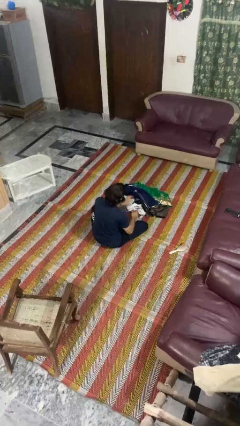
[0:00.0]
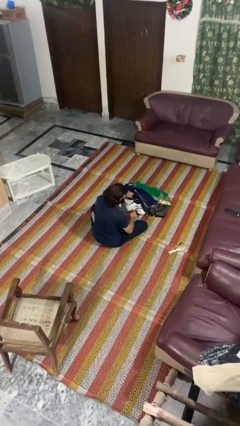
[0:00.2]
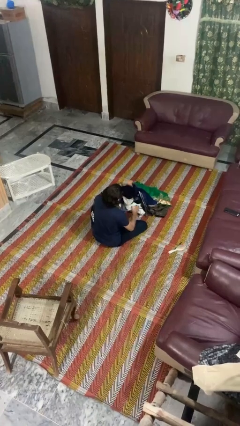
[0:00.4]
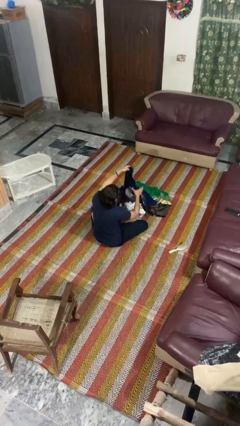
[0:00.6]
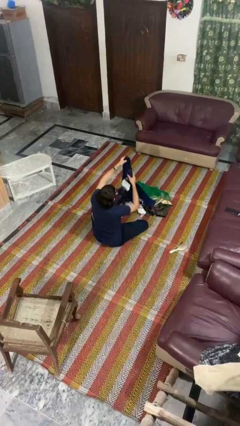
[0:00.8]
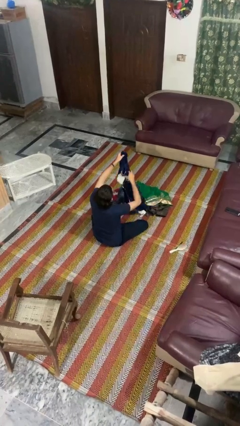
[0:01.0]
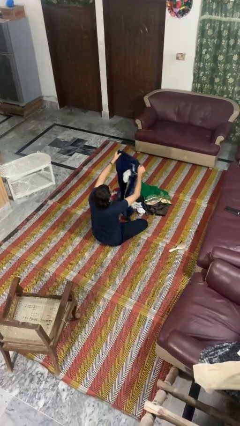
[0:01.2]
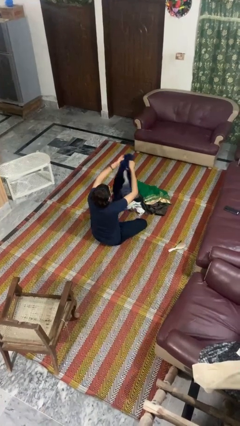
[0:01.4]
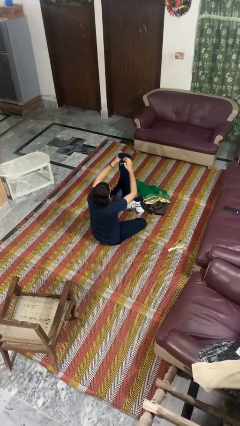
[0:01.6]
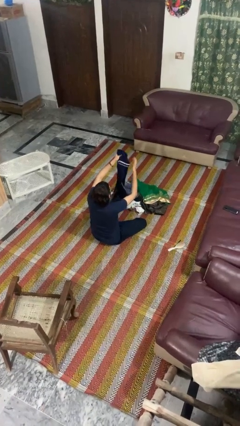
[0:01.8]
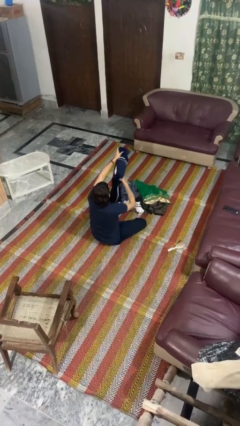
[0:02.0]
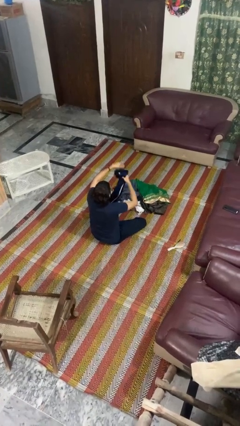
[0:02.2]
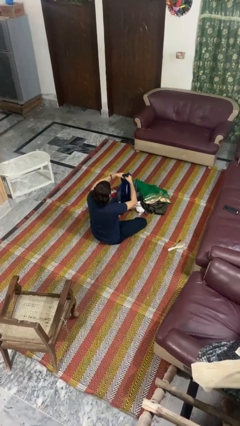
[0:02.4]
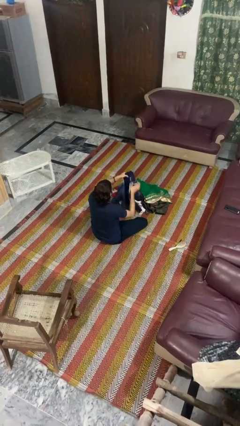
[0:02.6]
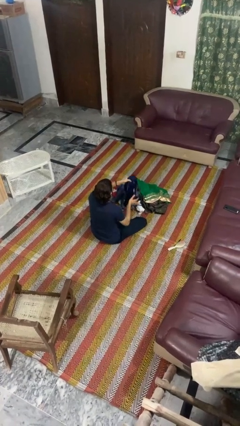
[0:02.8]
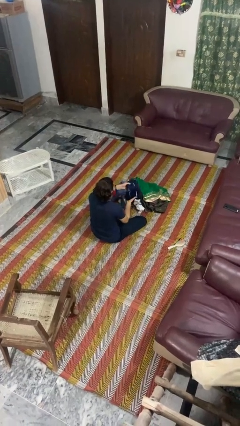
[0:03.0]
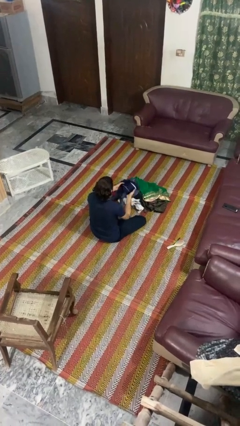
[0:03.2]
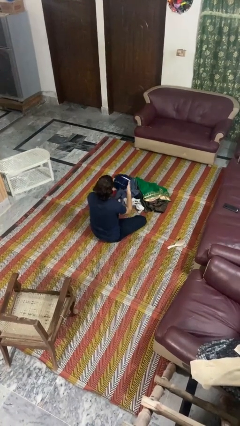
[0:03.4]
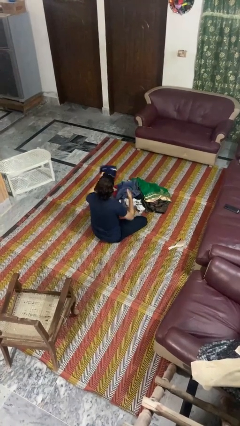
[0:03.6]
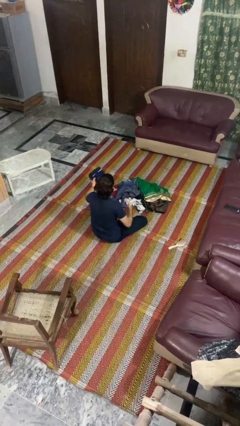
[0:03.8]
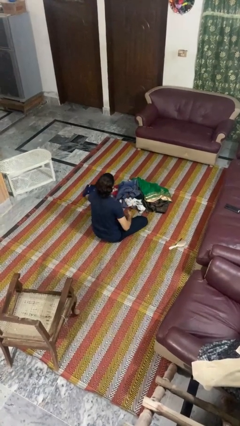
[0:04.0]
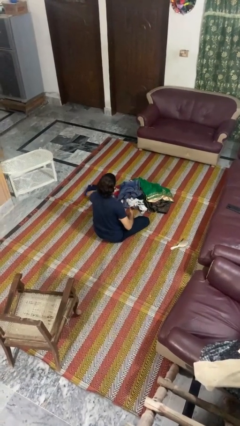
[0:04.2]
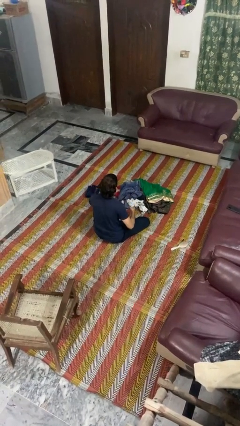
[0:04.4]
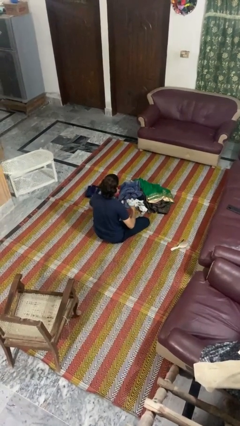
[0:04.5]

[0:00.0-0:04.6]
person folds pants

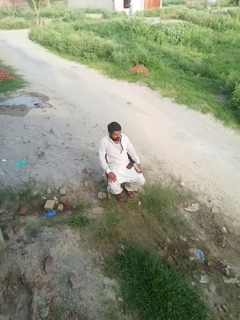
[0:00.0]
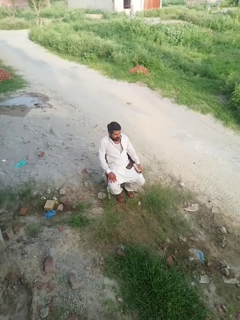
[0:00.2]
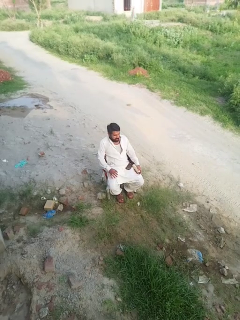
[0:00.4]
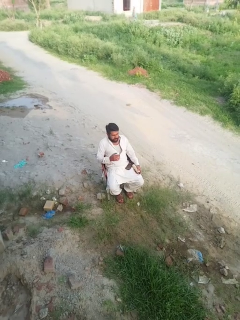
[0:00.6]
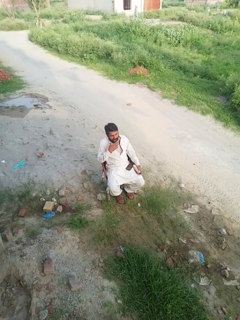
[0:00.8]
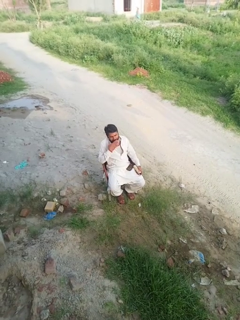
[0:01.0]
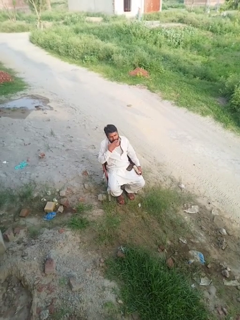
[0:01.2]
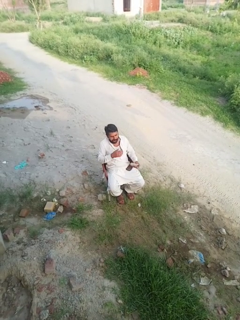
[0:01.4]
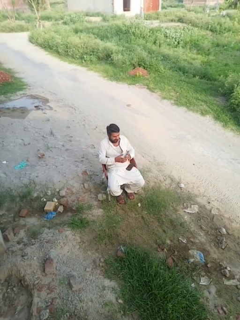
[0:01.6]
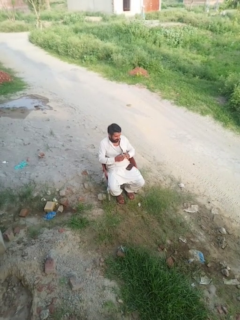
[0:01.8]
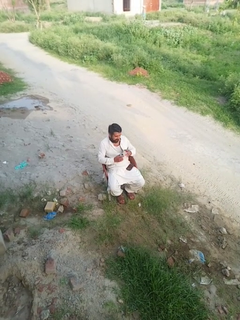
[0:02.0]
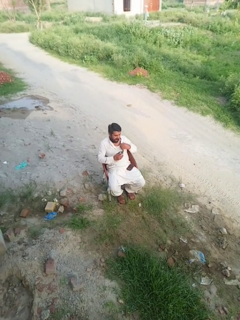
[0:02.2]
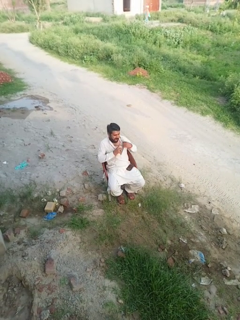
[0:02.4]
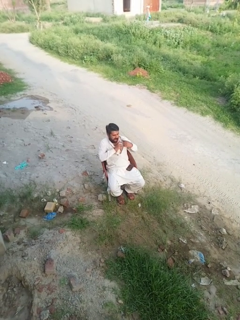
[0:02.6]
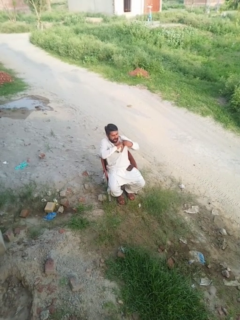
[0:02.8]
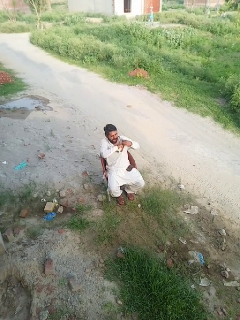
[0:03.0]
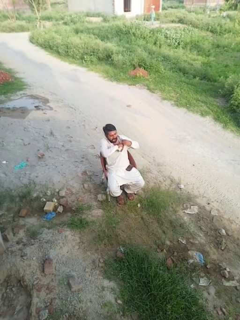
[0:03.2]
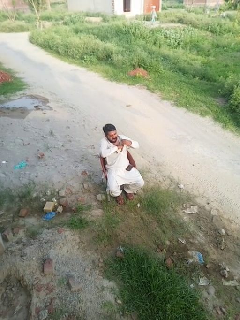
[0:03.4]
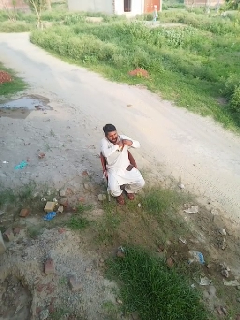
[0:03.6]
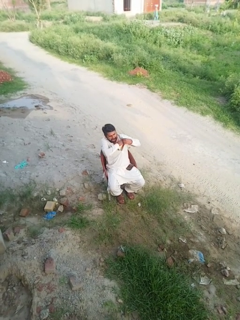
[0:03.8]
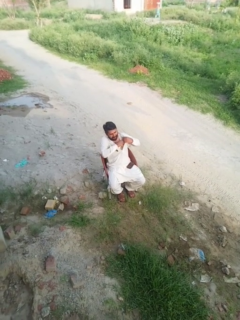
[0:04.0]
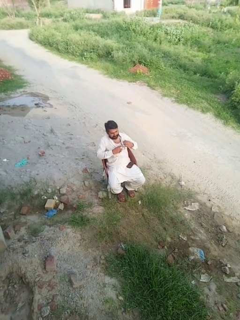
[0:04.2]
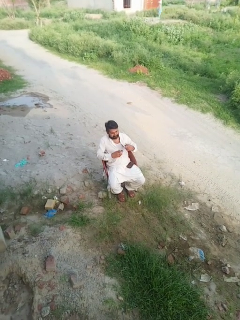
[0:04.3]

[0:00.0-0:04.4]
person applies deodorant

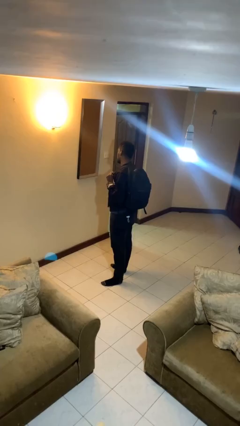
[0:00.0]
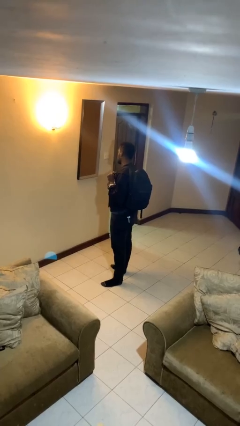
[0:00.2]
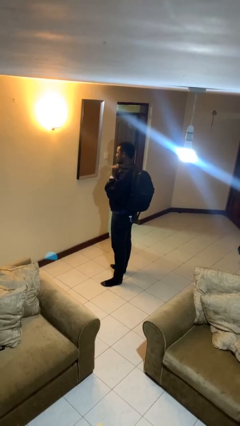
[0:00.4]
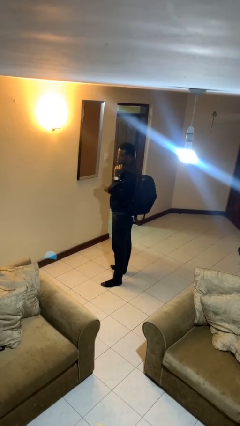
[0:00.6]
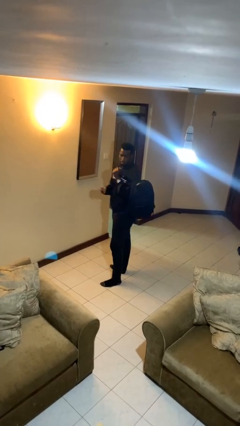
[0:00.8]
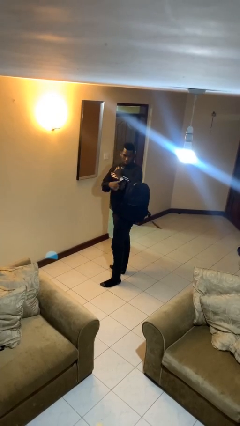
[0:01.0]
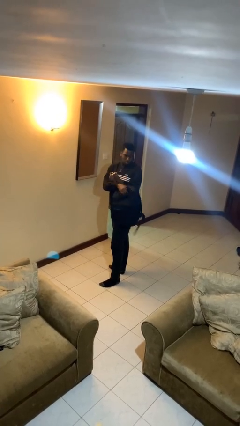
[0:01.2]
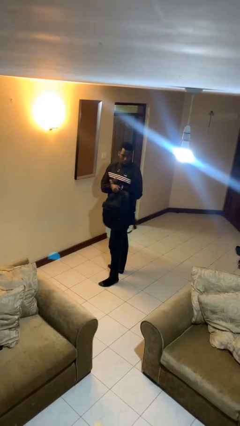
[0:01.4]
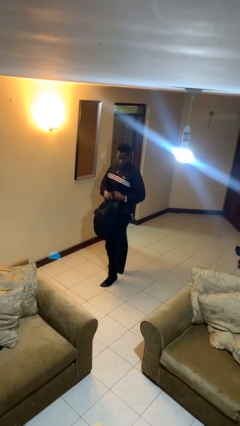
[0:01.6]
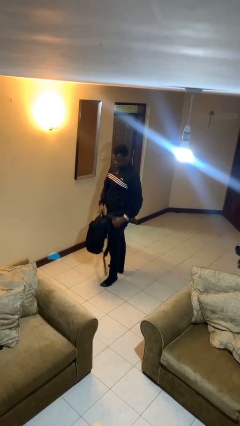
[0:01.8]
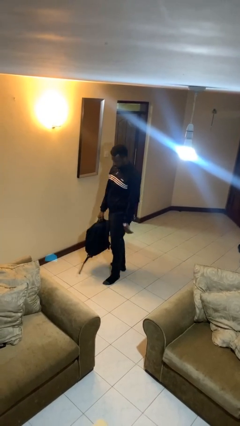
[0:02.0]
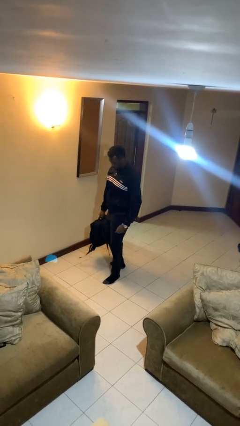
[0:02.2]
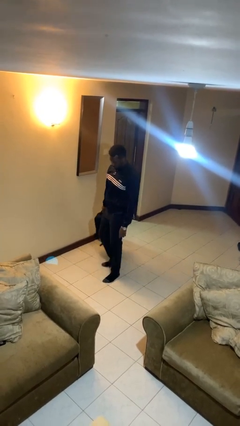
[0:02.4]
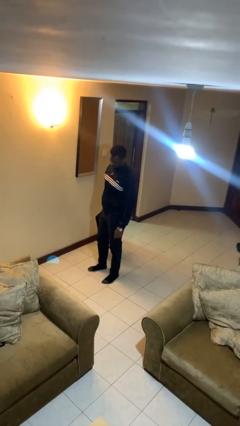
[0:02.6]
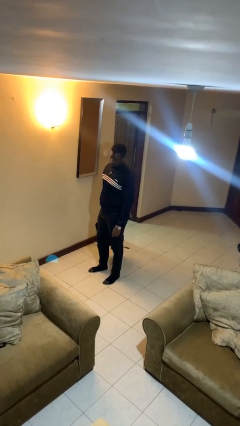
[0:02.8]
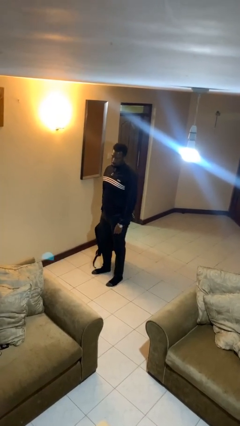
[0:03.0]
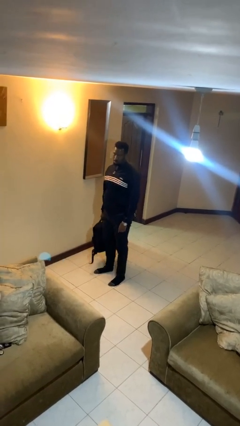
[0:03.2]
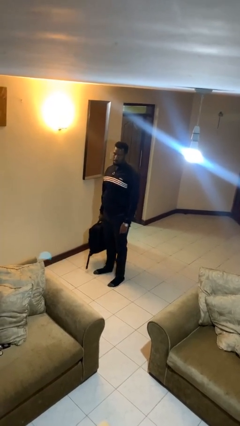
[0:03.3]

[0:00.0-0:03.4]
person takes off backpack

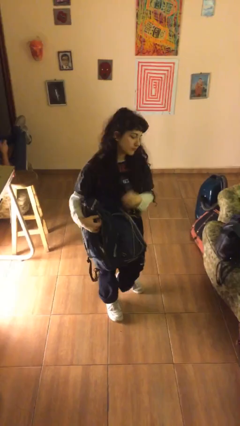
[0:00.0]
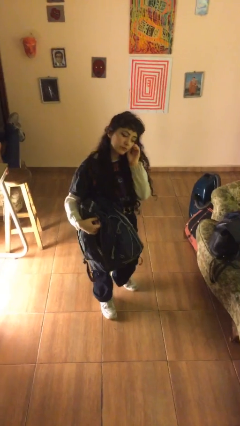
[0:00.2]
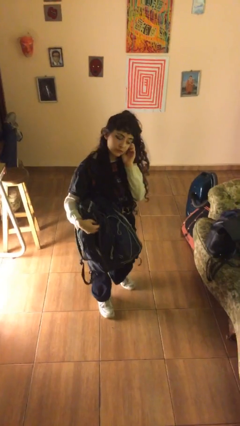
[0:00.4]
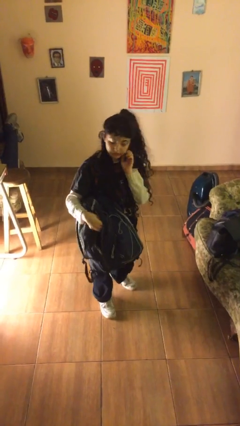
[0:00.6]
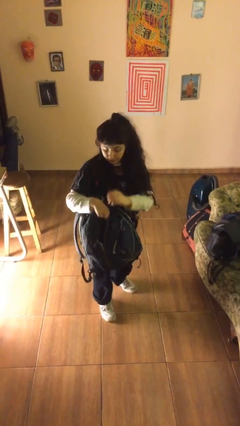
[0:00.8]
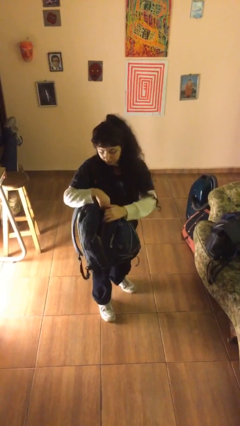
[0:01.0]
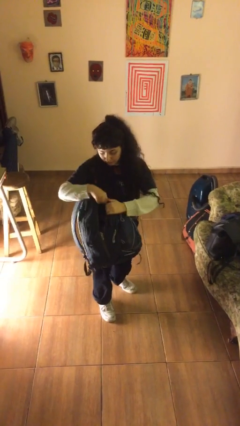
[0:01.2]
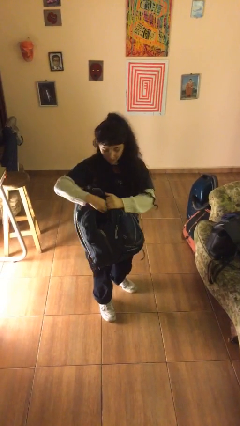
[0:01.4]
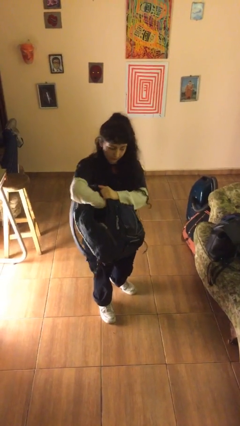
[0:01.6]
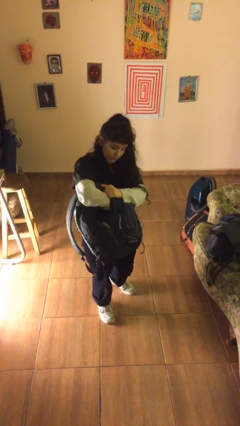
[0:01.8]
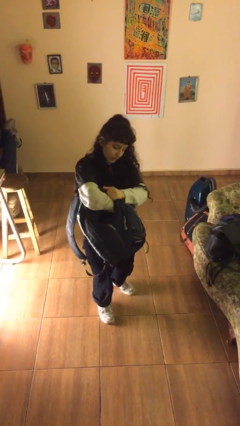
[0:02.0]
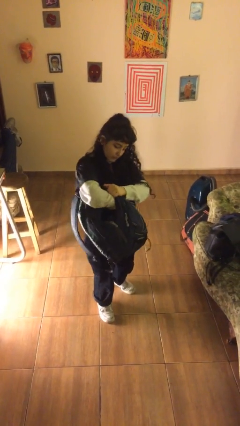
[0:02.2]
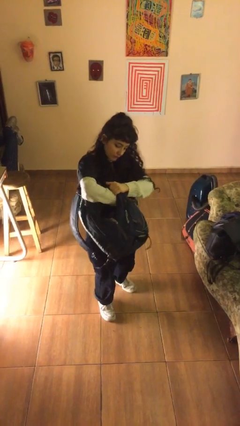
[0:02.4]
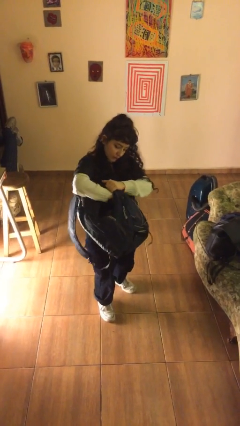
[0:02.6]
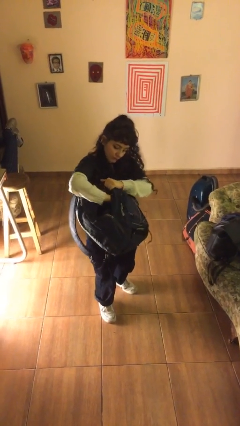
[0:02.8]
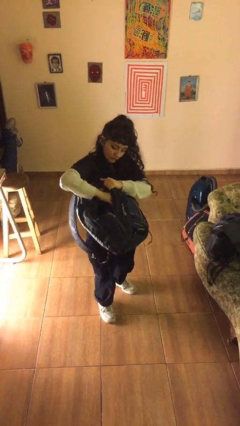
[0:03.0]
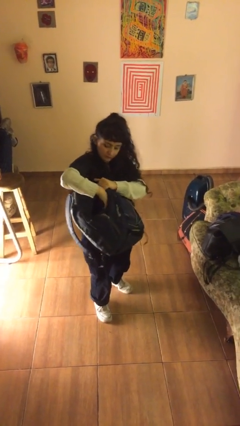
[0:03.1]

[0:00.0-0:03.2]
person searches in backpack

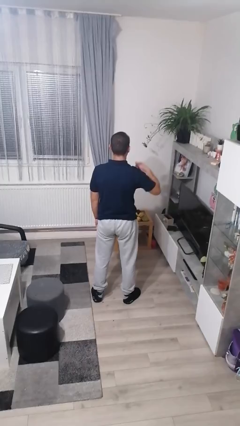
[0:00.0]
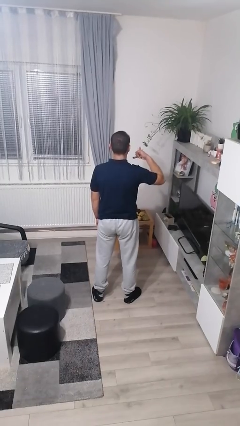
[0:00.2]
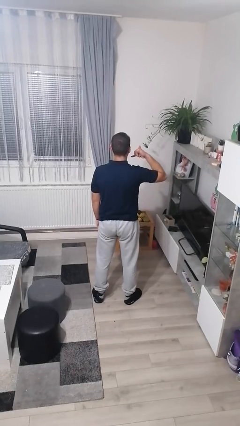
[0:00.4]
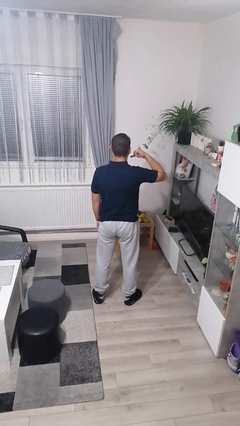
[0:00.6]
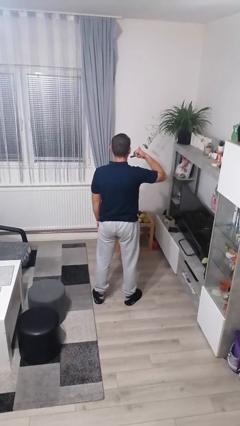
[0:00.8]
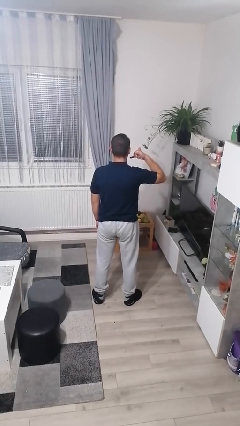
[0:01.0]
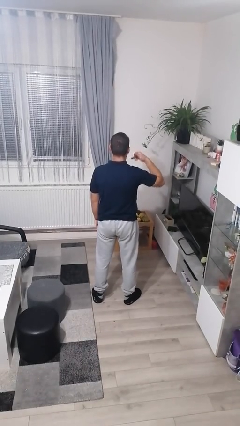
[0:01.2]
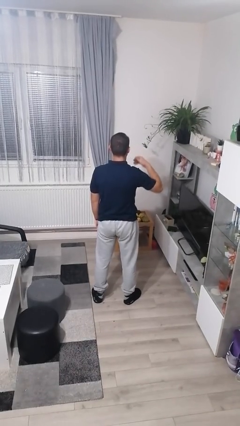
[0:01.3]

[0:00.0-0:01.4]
person gestures call me

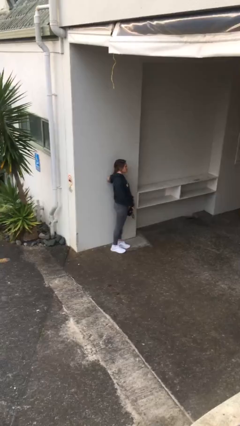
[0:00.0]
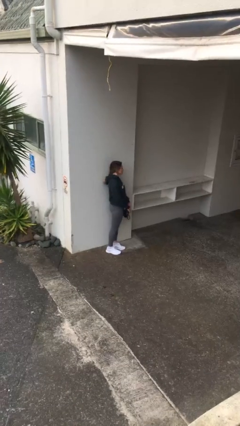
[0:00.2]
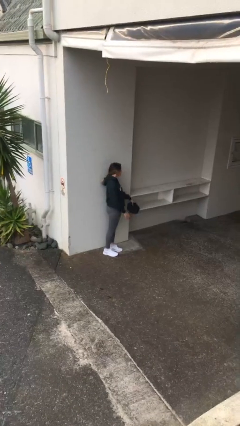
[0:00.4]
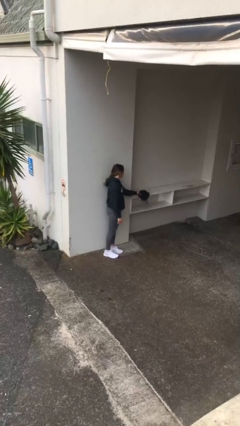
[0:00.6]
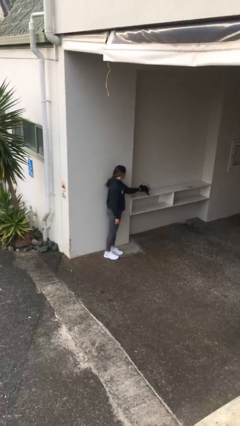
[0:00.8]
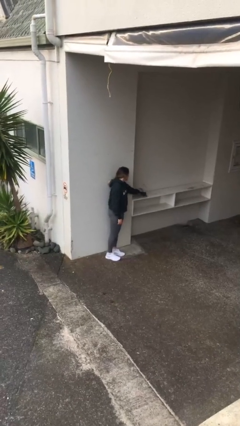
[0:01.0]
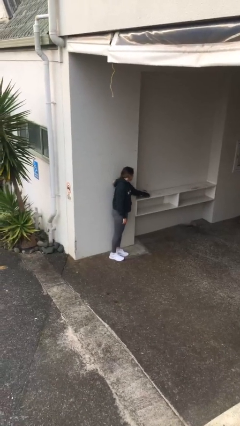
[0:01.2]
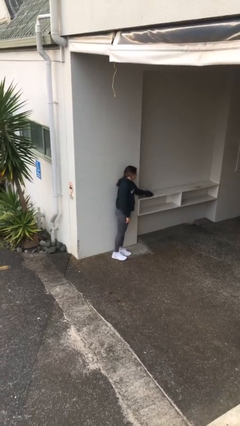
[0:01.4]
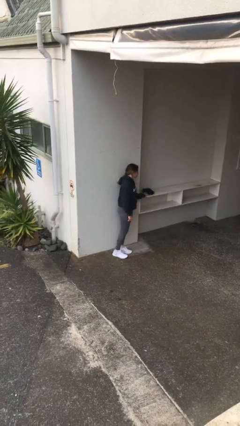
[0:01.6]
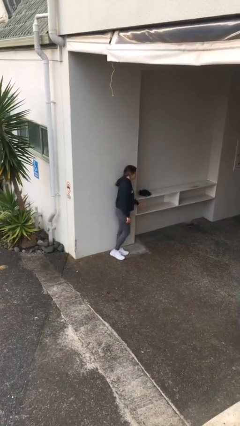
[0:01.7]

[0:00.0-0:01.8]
person puts down object on table
